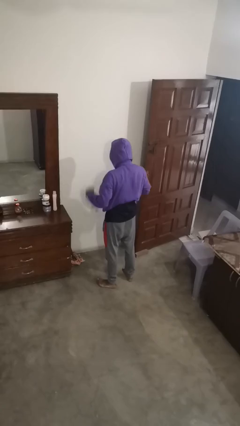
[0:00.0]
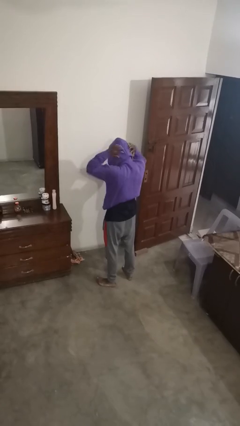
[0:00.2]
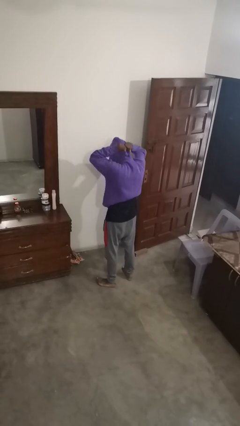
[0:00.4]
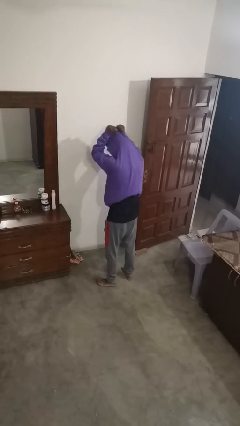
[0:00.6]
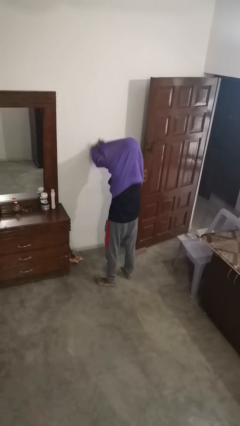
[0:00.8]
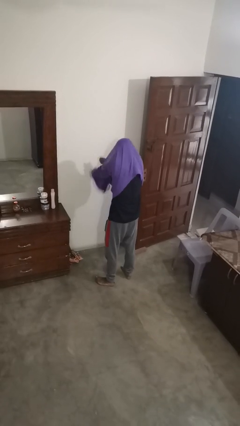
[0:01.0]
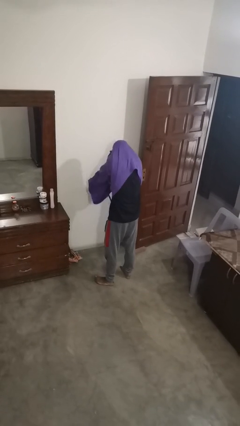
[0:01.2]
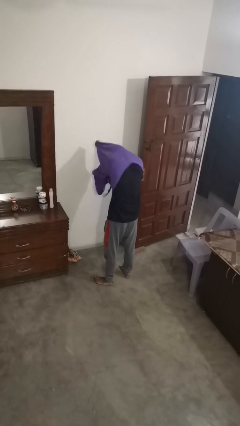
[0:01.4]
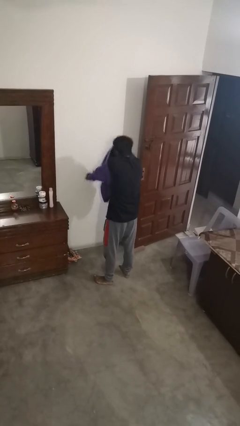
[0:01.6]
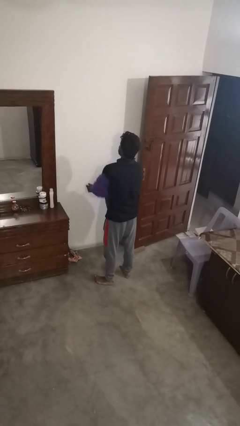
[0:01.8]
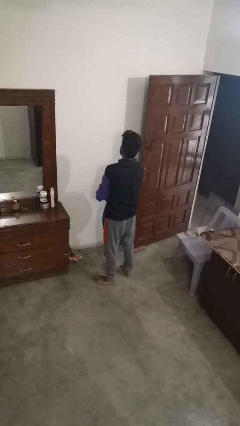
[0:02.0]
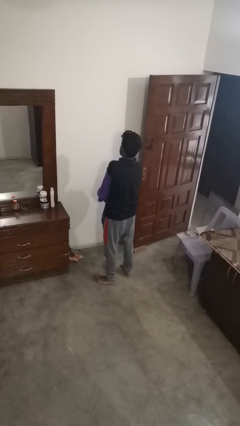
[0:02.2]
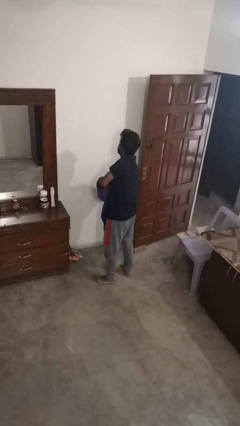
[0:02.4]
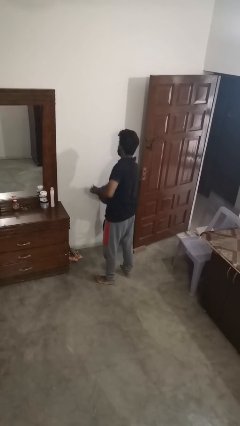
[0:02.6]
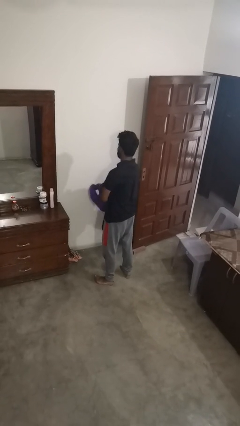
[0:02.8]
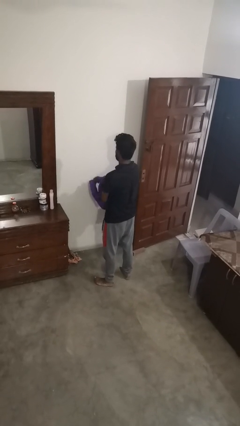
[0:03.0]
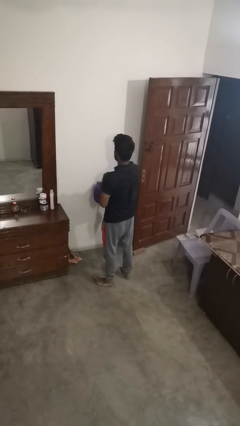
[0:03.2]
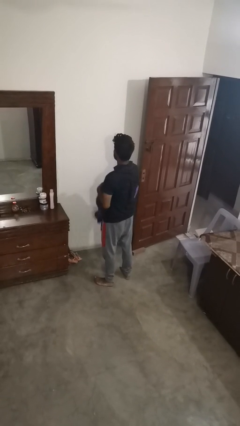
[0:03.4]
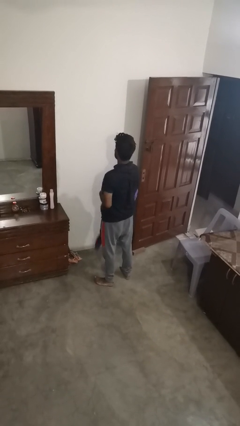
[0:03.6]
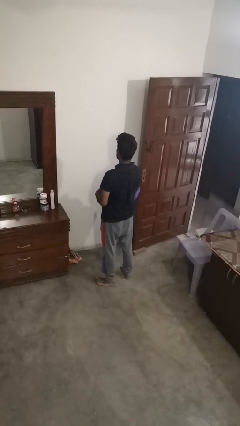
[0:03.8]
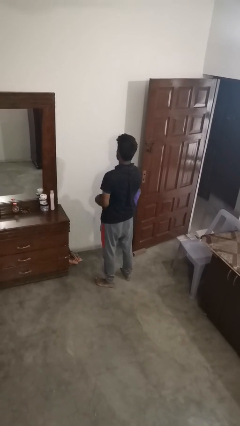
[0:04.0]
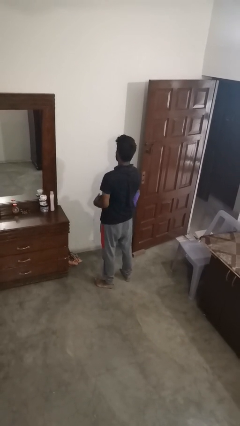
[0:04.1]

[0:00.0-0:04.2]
person takes off hoodie

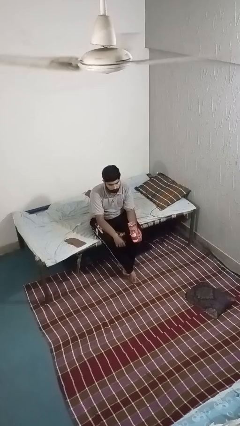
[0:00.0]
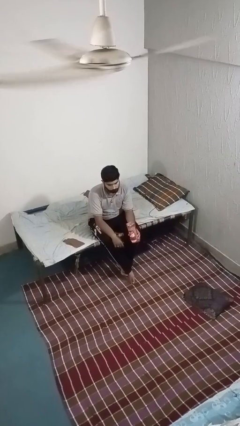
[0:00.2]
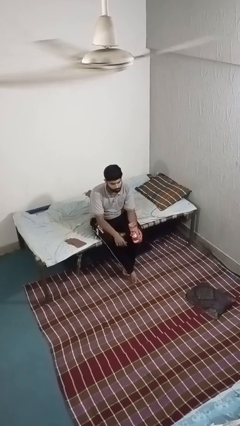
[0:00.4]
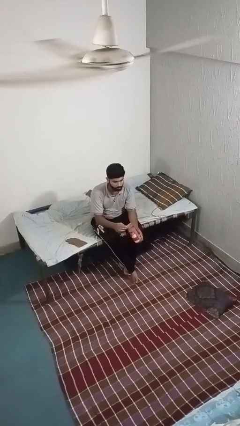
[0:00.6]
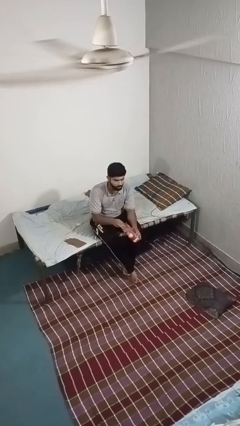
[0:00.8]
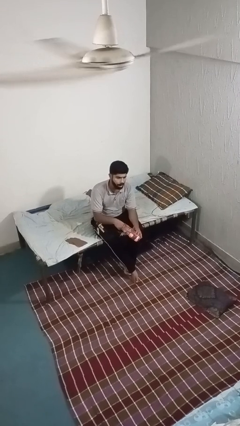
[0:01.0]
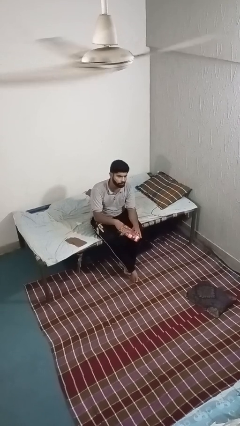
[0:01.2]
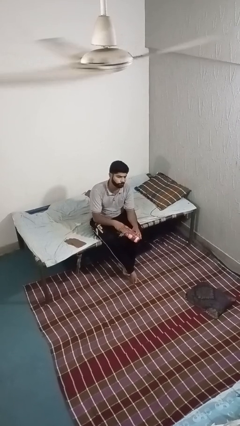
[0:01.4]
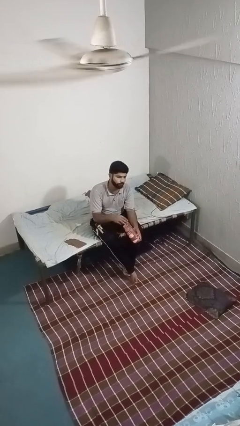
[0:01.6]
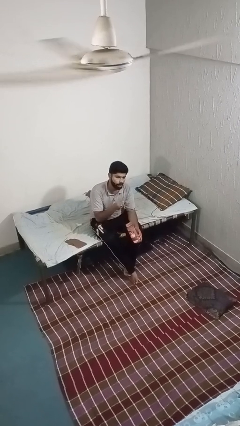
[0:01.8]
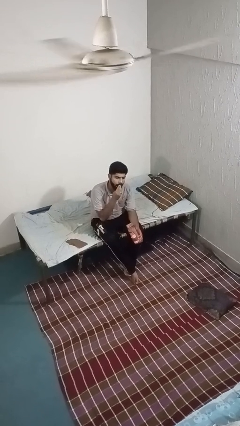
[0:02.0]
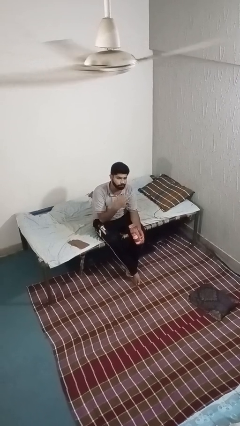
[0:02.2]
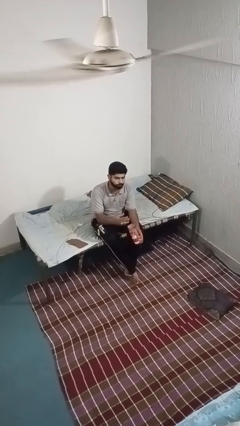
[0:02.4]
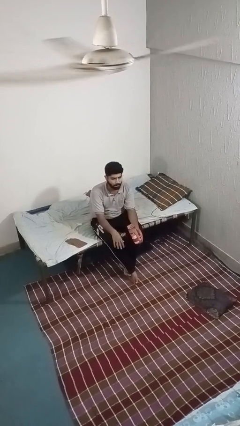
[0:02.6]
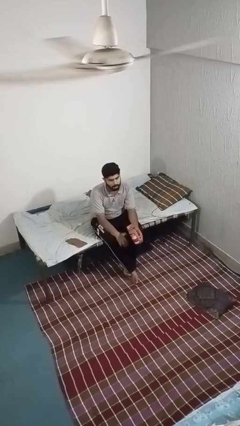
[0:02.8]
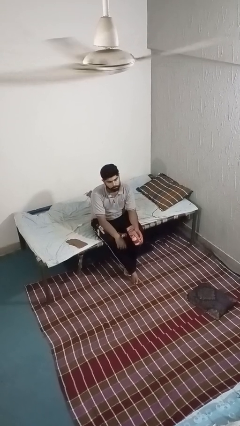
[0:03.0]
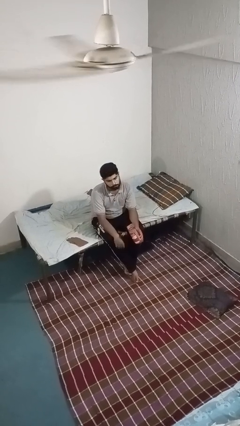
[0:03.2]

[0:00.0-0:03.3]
person eats snack from bag

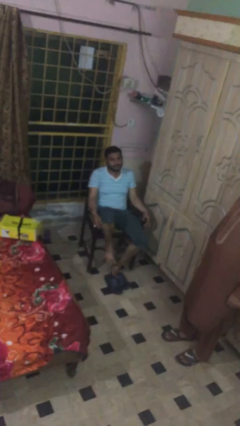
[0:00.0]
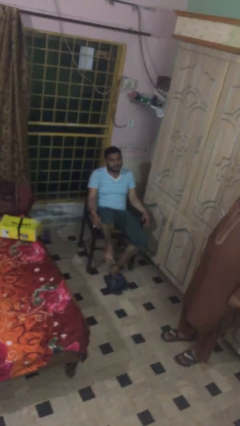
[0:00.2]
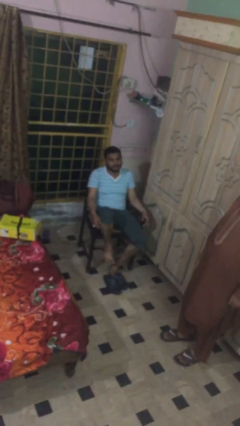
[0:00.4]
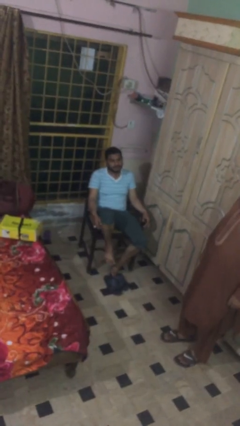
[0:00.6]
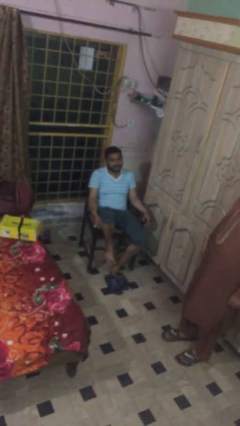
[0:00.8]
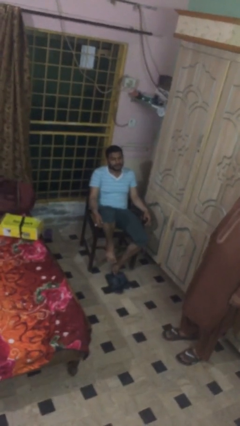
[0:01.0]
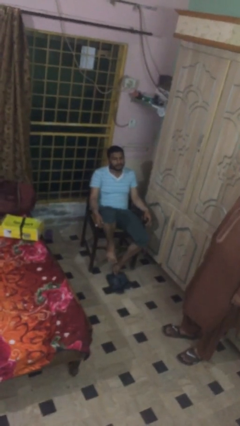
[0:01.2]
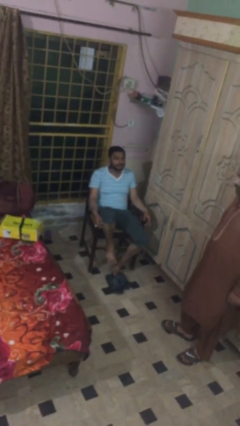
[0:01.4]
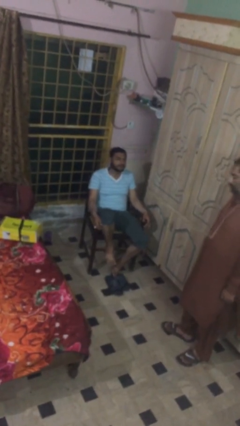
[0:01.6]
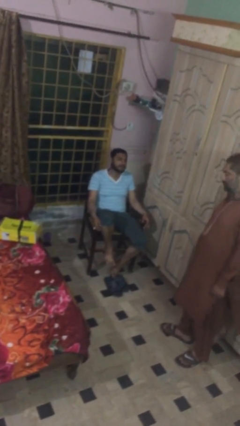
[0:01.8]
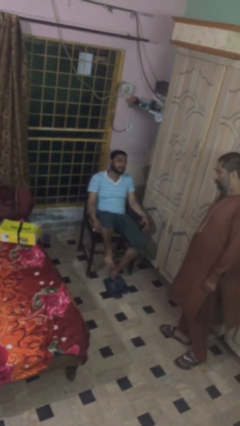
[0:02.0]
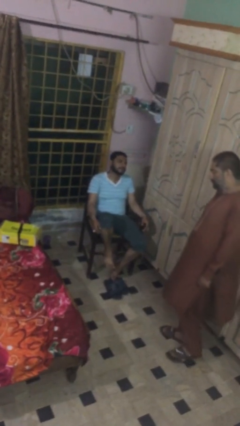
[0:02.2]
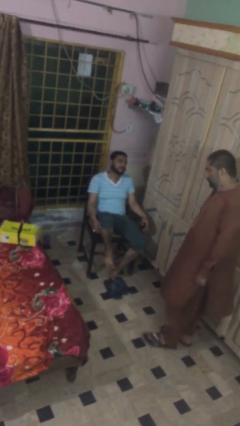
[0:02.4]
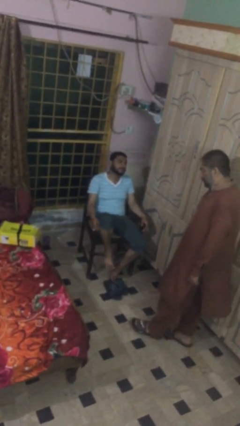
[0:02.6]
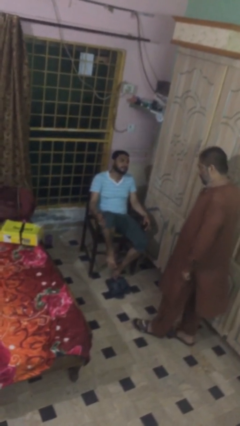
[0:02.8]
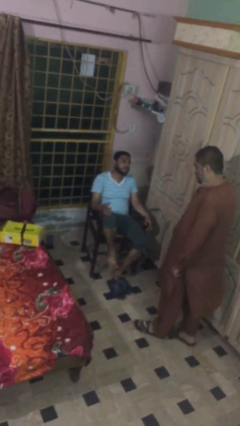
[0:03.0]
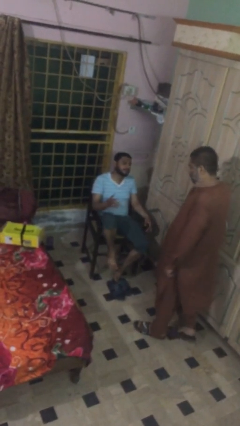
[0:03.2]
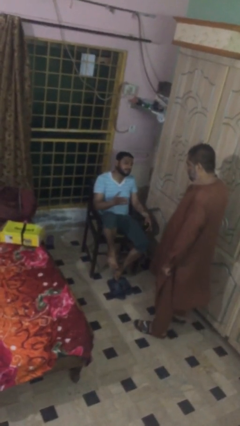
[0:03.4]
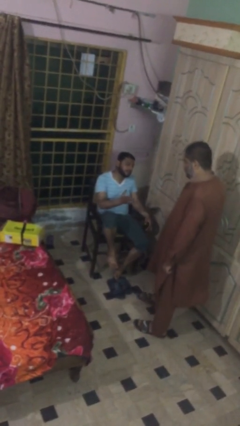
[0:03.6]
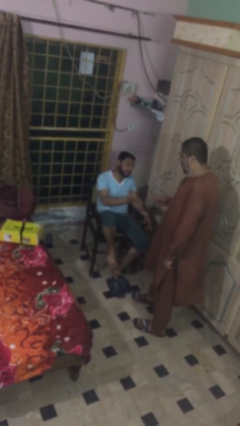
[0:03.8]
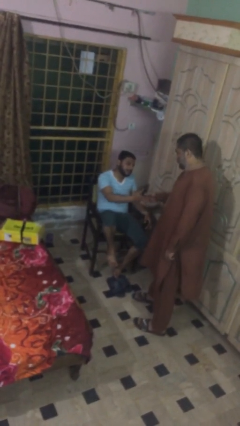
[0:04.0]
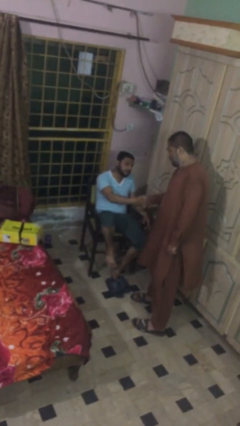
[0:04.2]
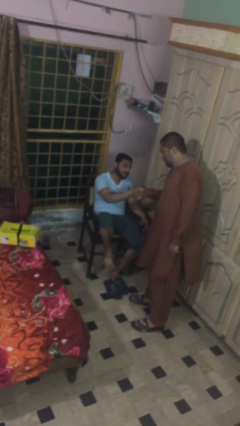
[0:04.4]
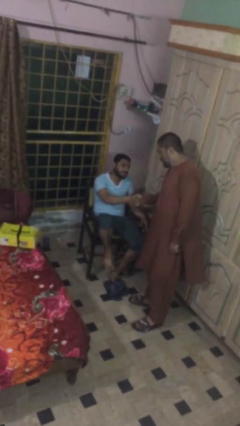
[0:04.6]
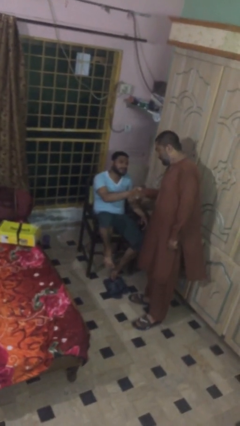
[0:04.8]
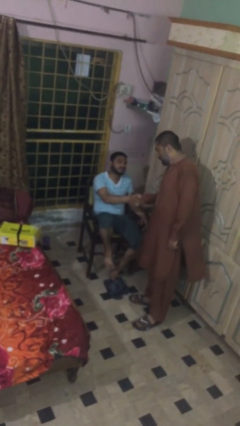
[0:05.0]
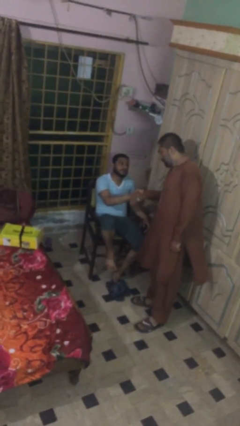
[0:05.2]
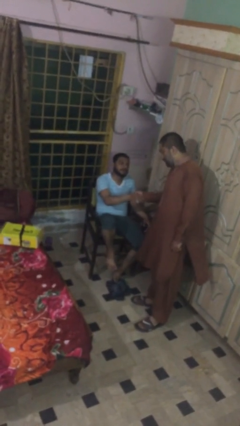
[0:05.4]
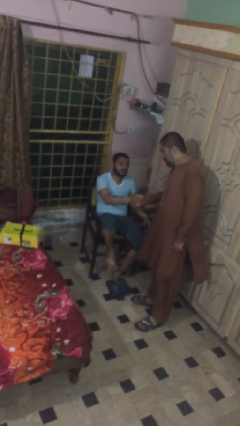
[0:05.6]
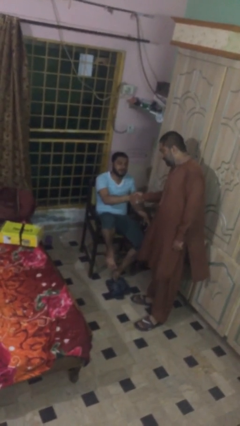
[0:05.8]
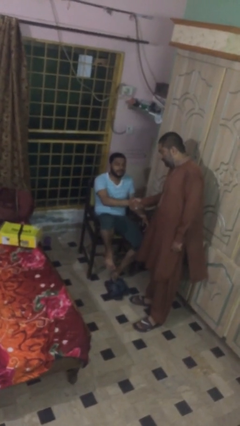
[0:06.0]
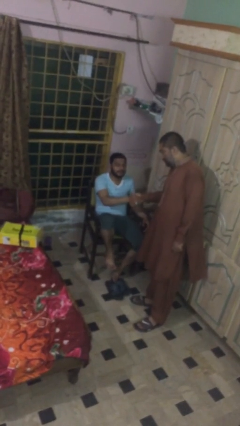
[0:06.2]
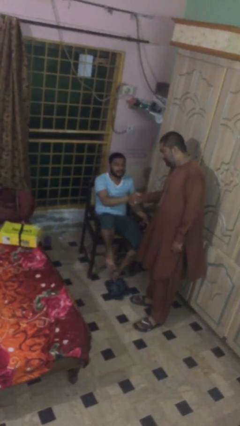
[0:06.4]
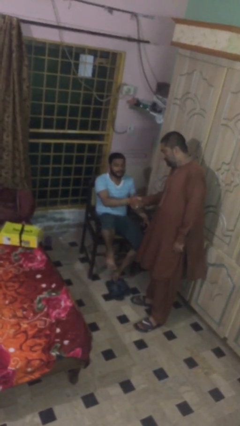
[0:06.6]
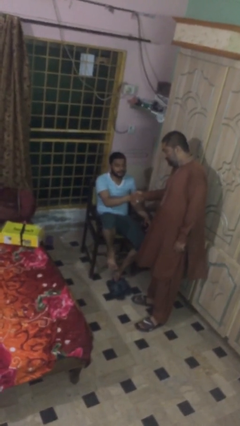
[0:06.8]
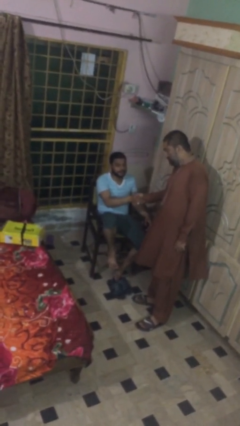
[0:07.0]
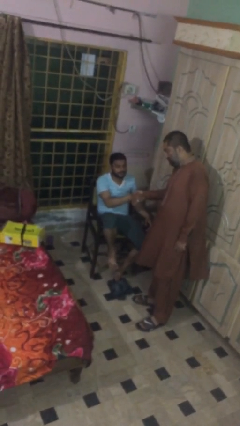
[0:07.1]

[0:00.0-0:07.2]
person shakes hand

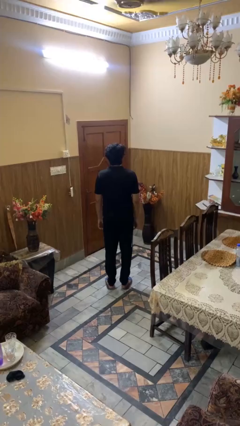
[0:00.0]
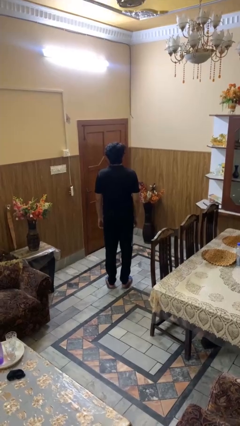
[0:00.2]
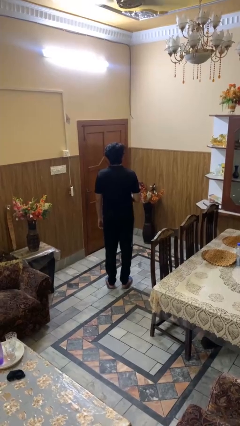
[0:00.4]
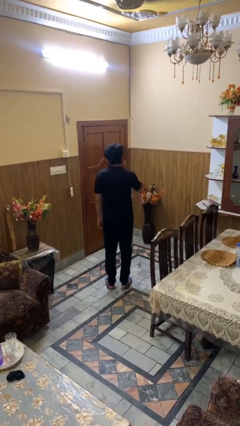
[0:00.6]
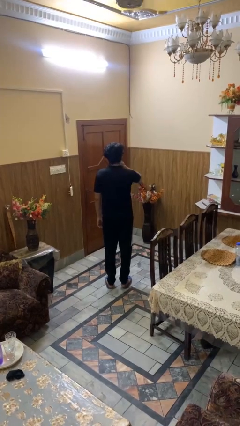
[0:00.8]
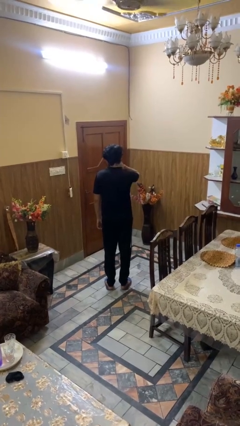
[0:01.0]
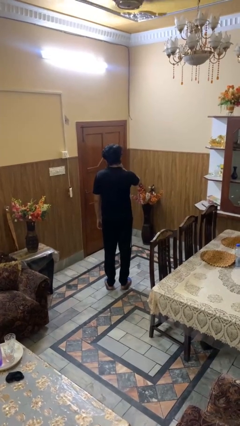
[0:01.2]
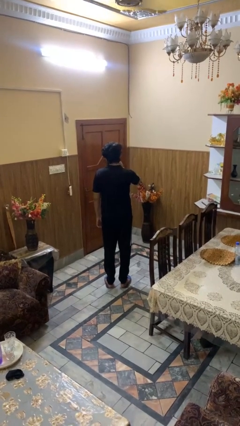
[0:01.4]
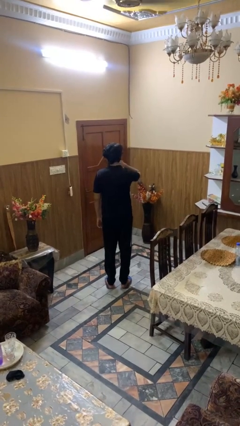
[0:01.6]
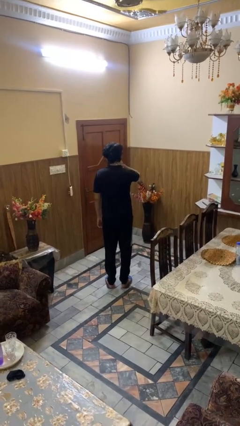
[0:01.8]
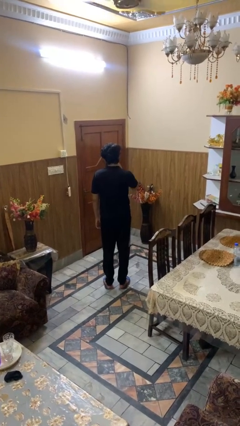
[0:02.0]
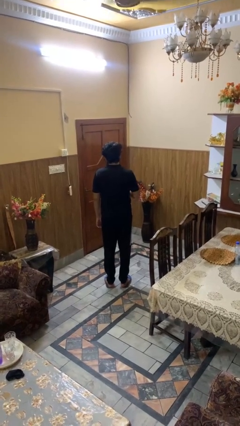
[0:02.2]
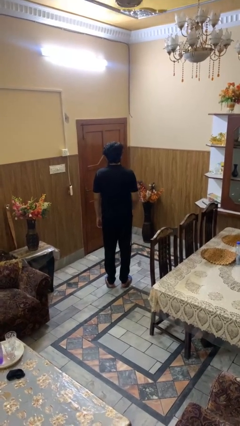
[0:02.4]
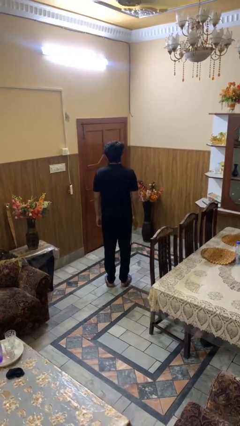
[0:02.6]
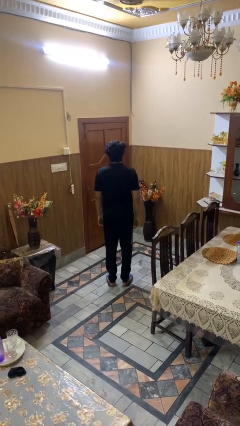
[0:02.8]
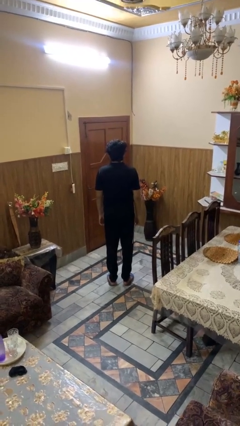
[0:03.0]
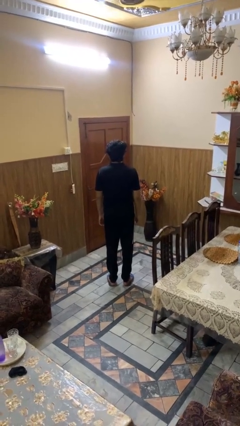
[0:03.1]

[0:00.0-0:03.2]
person rubs neck
